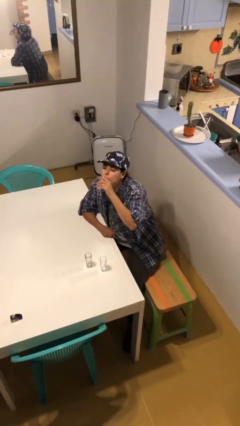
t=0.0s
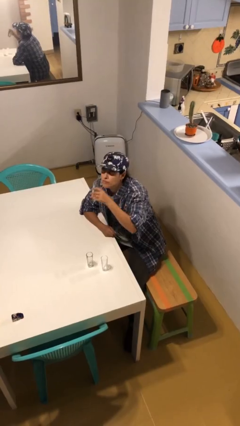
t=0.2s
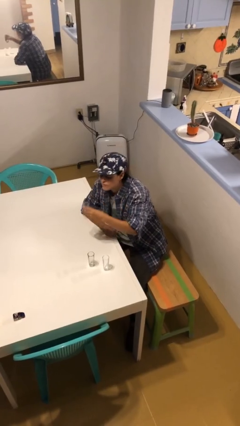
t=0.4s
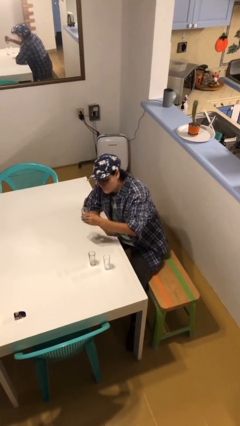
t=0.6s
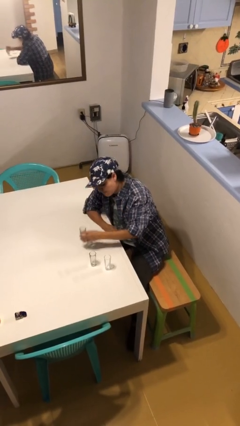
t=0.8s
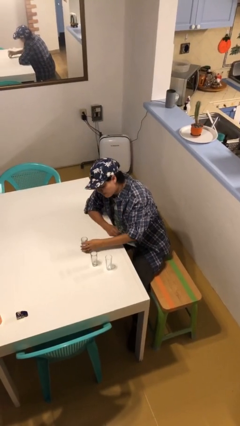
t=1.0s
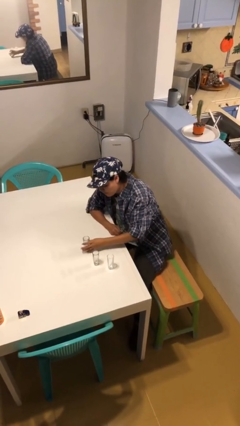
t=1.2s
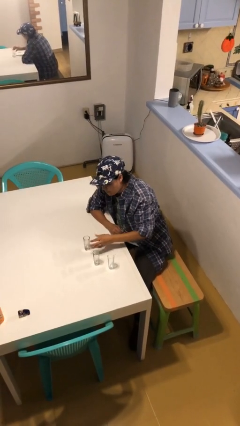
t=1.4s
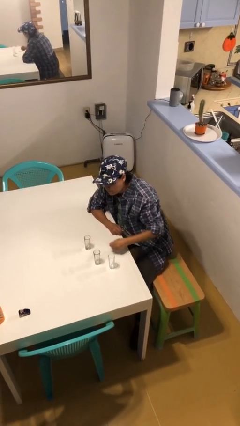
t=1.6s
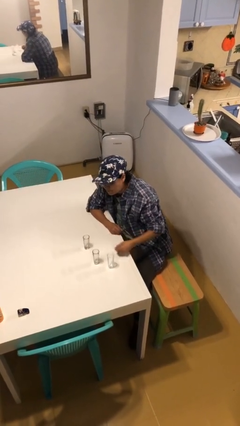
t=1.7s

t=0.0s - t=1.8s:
person puts down object on table

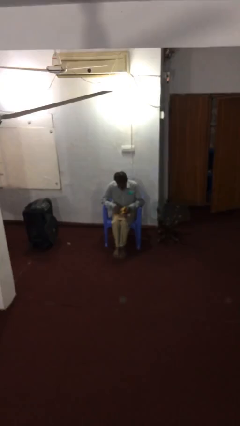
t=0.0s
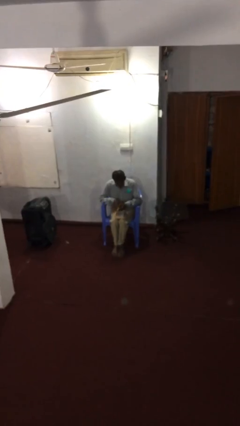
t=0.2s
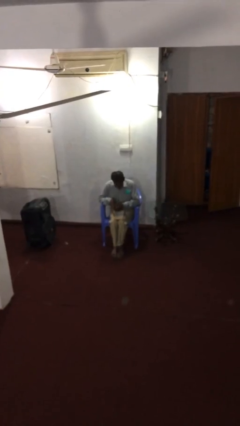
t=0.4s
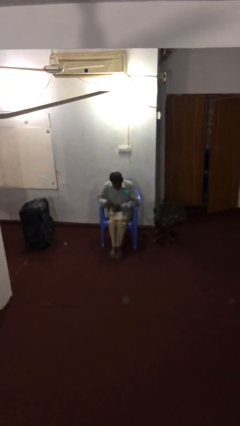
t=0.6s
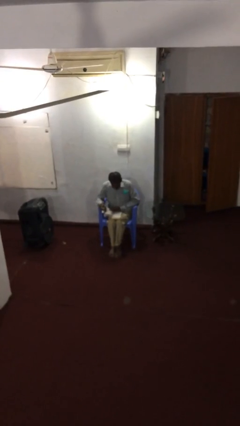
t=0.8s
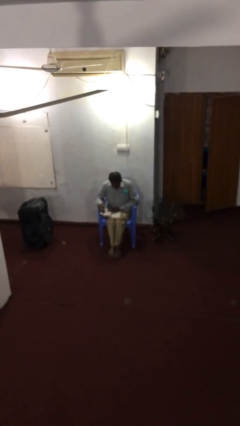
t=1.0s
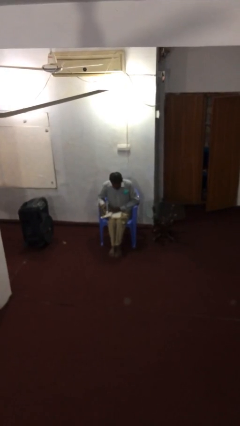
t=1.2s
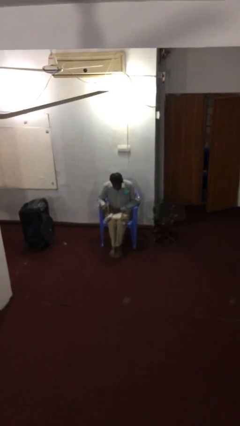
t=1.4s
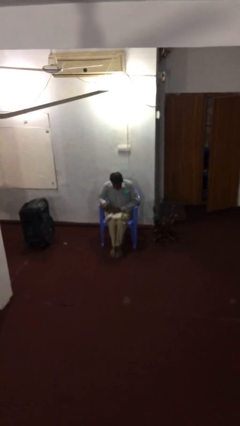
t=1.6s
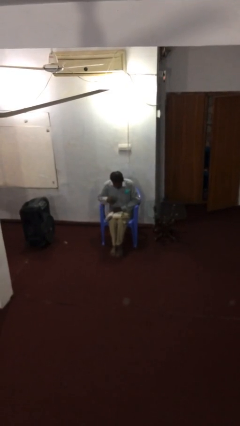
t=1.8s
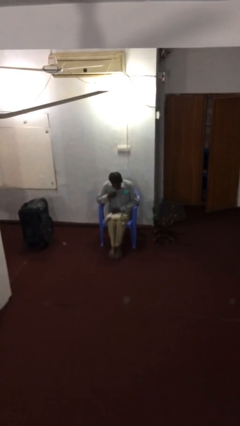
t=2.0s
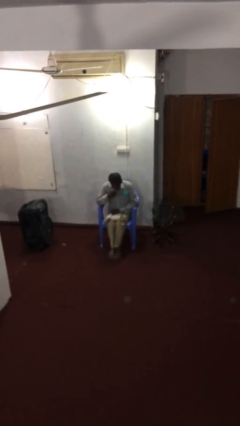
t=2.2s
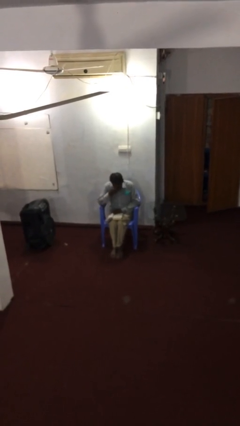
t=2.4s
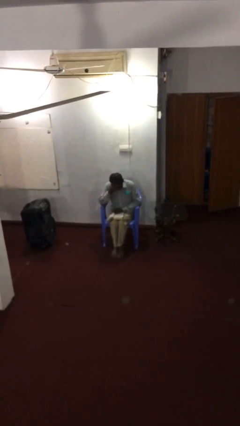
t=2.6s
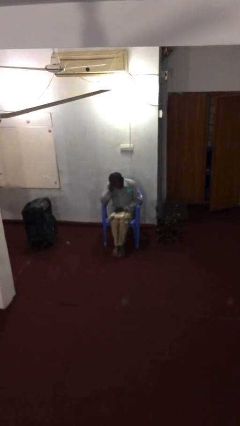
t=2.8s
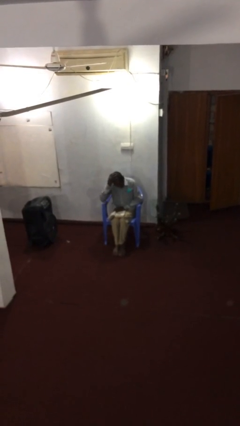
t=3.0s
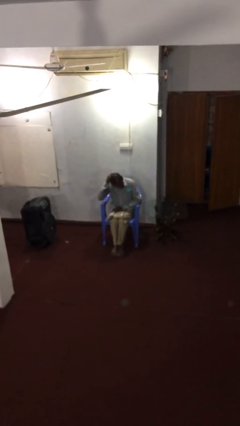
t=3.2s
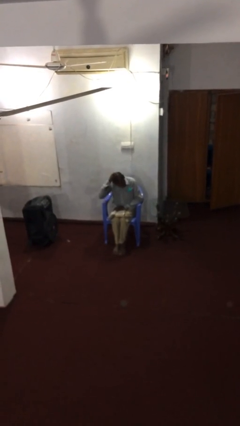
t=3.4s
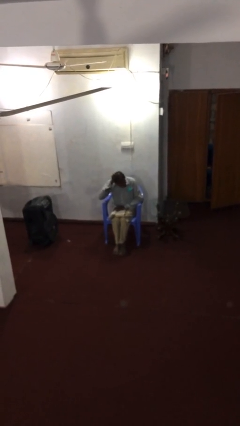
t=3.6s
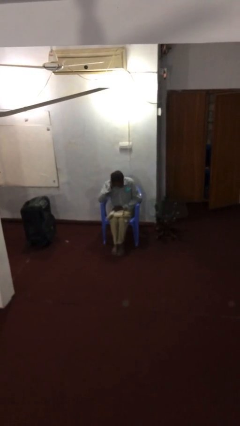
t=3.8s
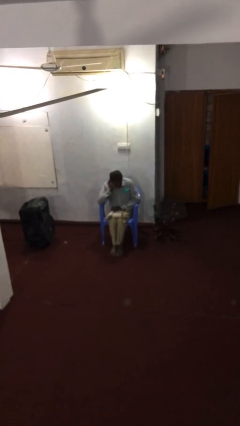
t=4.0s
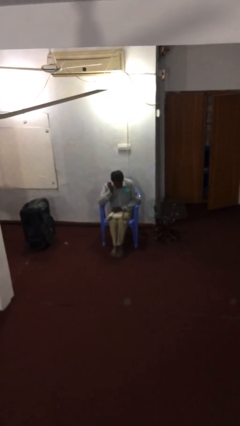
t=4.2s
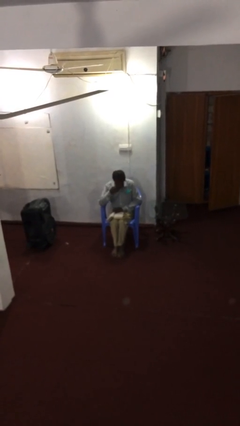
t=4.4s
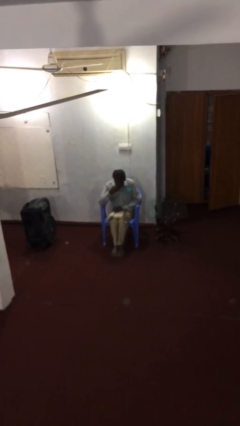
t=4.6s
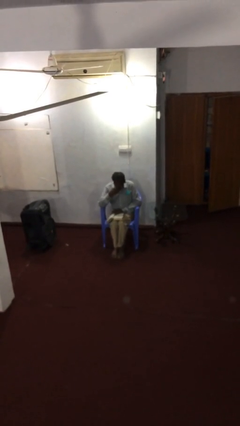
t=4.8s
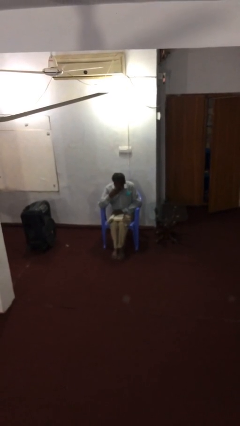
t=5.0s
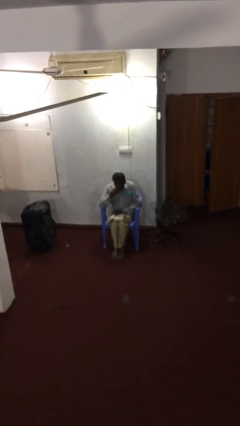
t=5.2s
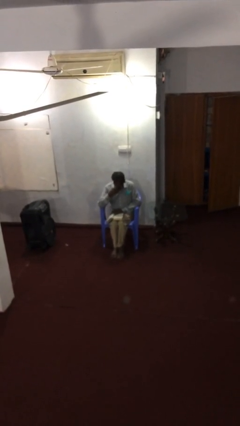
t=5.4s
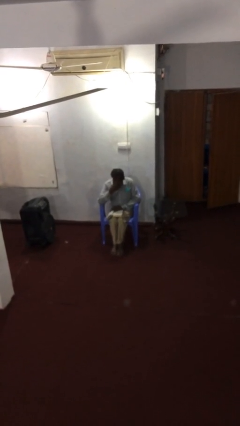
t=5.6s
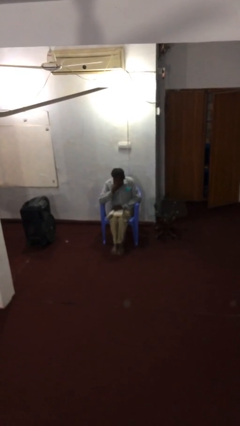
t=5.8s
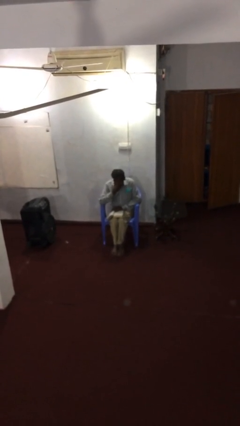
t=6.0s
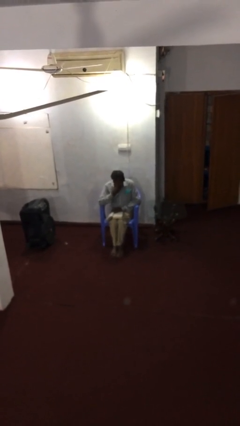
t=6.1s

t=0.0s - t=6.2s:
person reads document

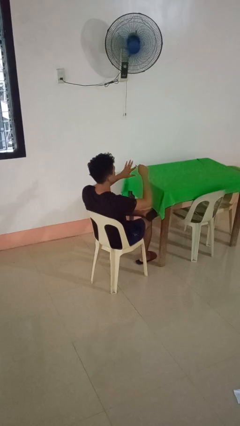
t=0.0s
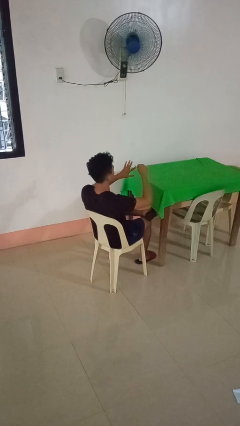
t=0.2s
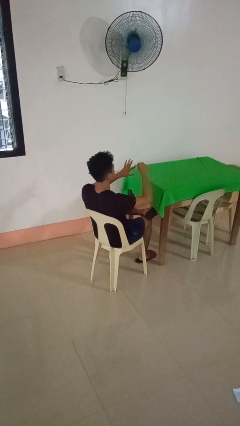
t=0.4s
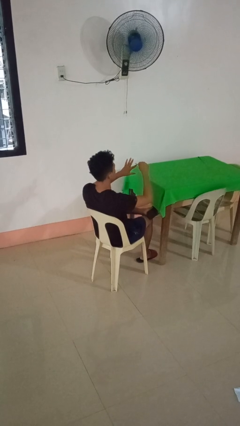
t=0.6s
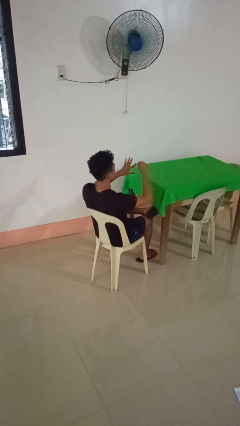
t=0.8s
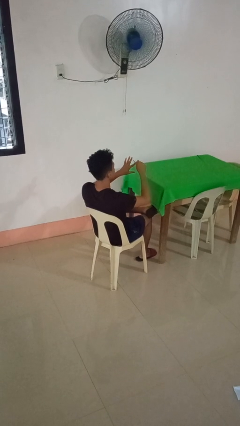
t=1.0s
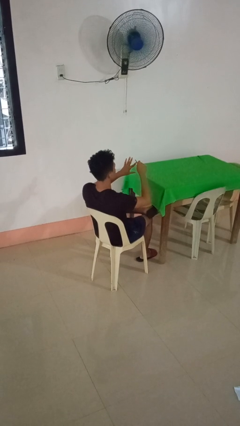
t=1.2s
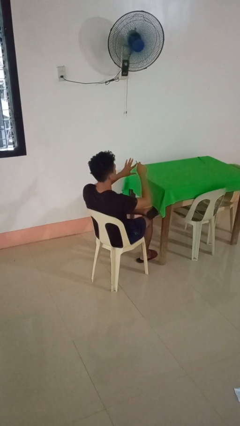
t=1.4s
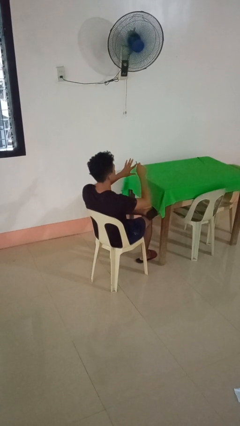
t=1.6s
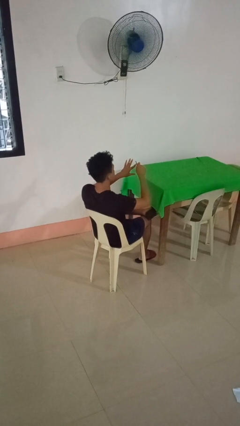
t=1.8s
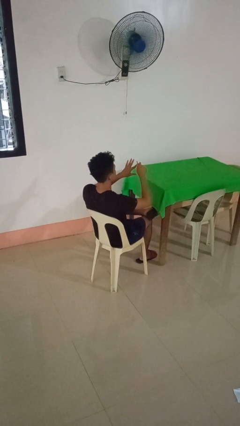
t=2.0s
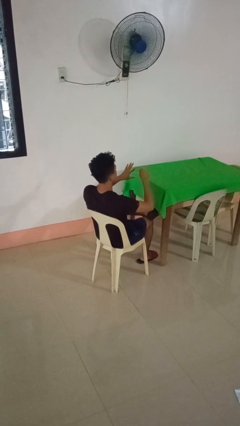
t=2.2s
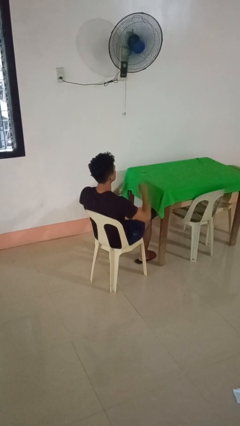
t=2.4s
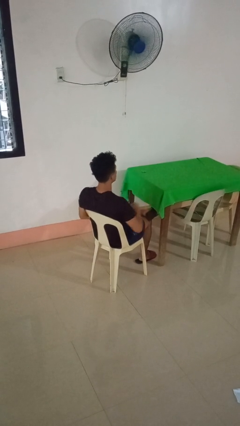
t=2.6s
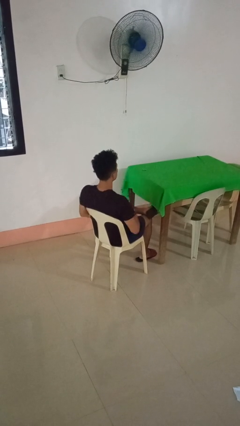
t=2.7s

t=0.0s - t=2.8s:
person files fingernails

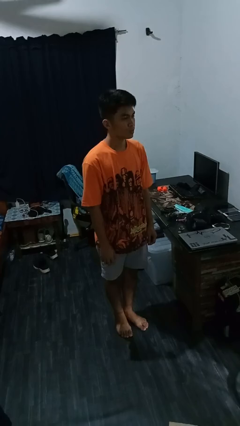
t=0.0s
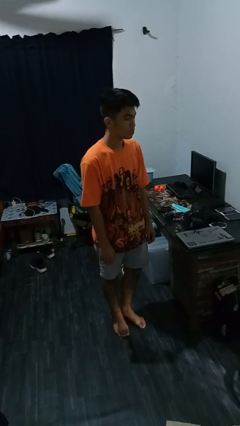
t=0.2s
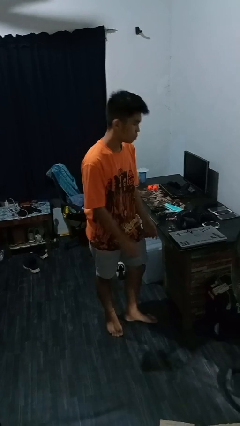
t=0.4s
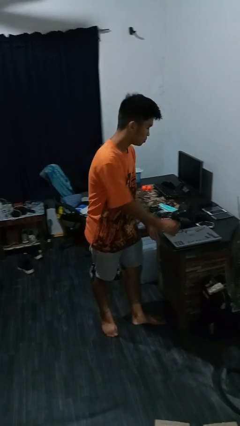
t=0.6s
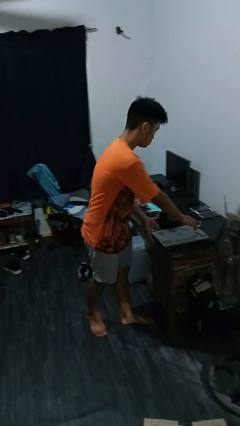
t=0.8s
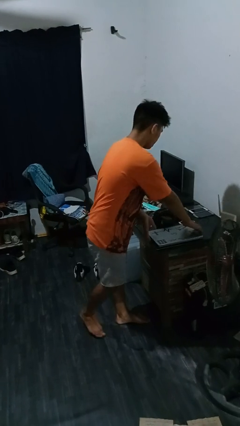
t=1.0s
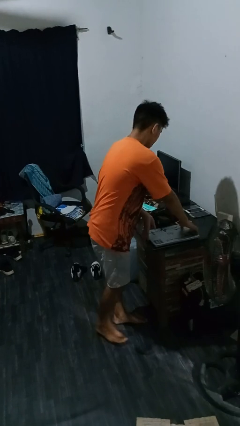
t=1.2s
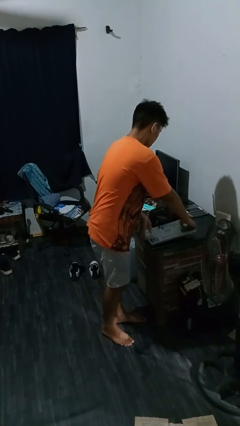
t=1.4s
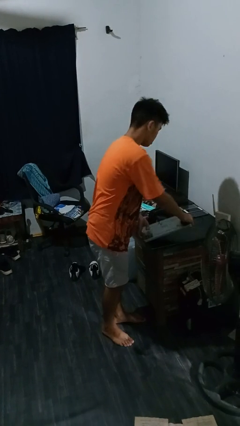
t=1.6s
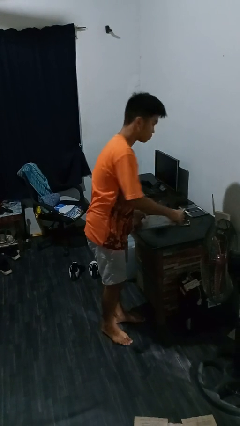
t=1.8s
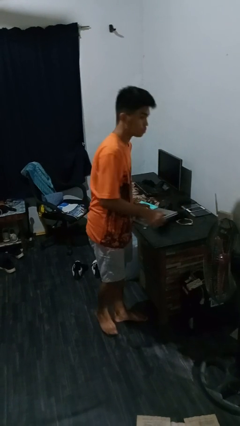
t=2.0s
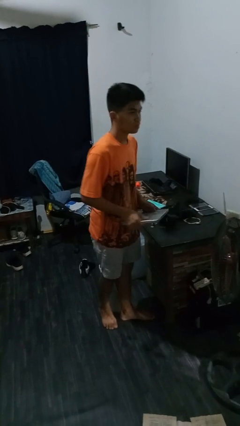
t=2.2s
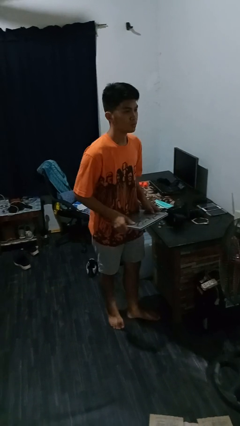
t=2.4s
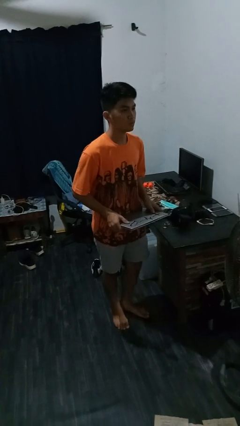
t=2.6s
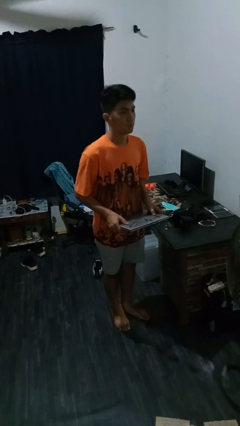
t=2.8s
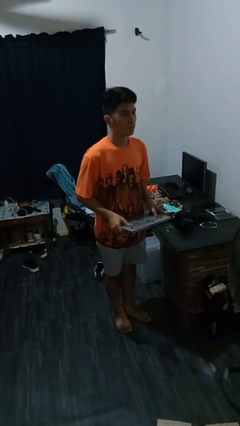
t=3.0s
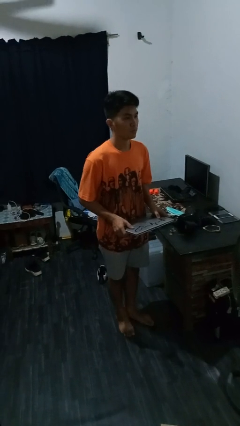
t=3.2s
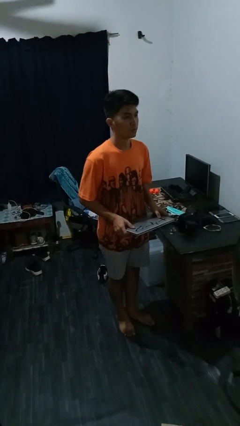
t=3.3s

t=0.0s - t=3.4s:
person picks up object from countertop

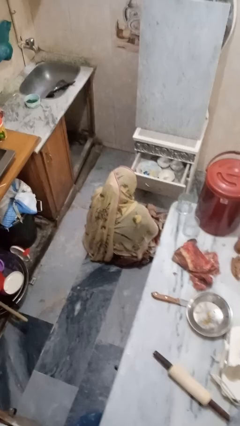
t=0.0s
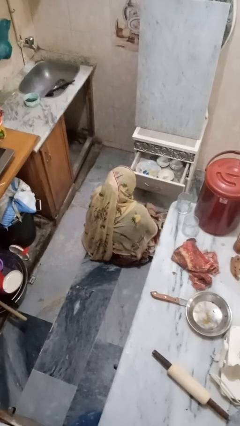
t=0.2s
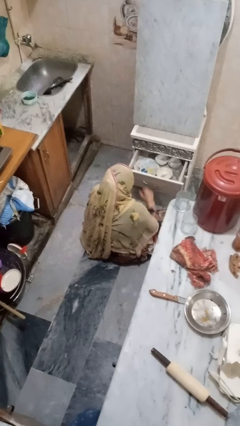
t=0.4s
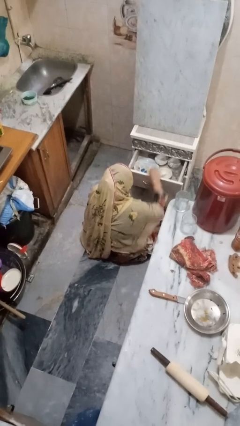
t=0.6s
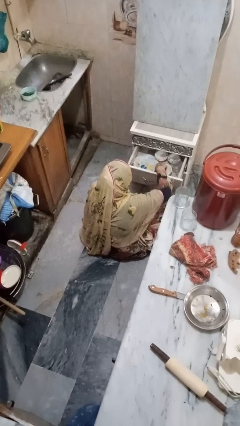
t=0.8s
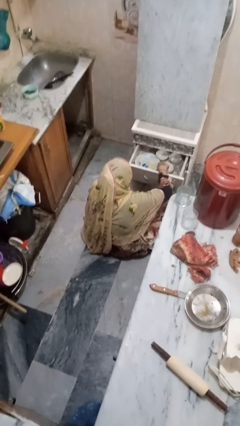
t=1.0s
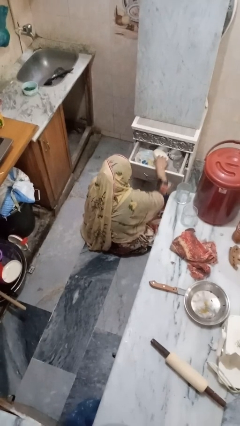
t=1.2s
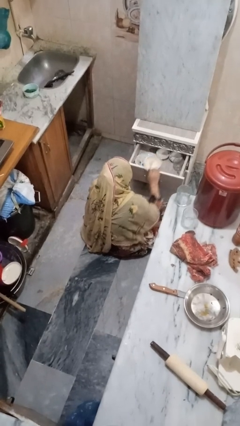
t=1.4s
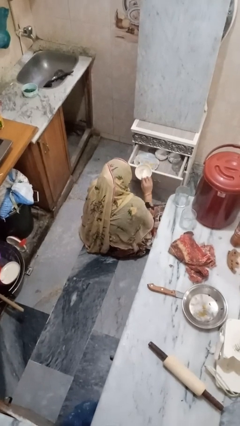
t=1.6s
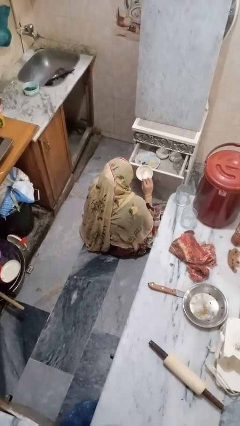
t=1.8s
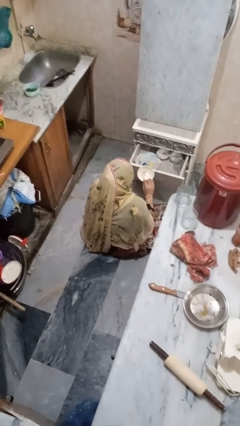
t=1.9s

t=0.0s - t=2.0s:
person takes object from kitchen drawer

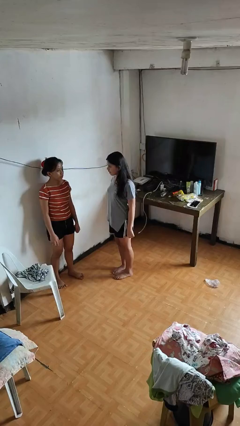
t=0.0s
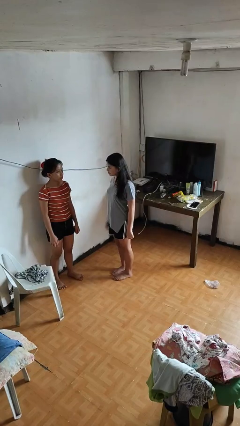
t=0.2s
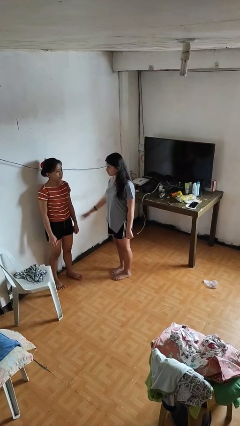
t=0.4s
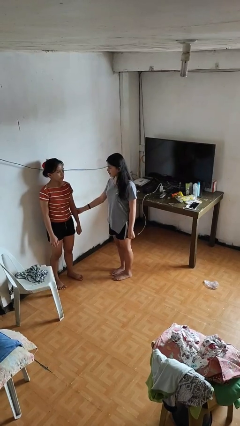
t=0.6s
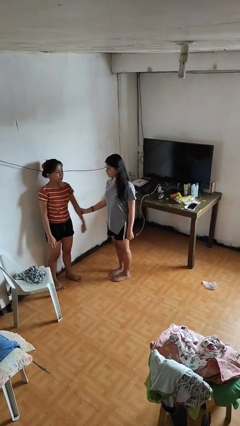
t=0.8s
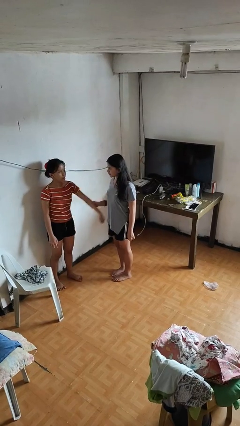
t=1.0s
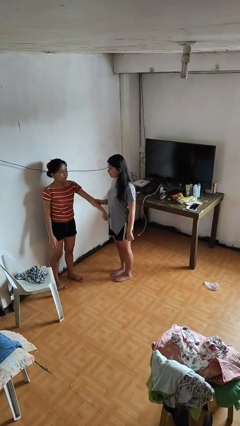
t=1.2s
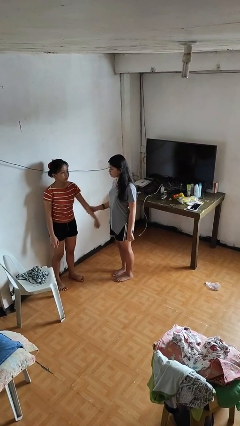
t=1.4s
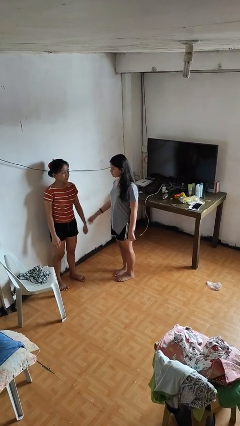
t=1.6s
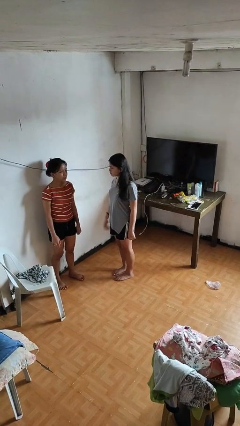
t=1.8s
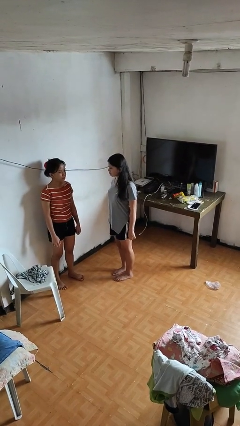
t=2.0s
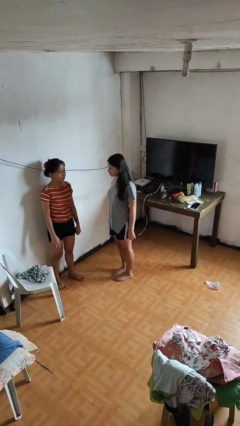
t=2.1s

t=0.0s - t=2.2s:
person grabs person by forearm
